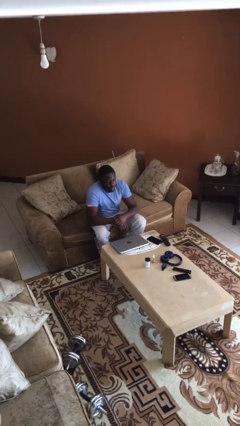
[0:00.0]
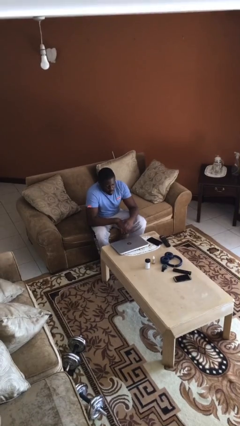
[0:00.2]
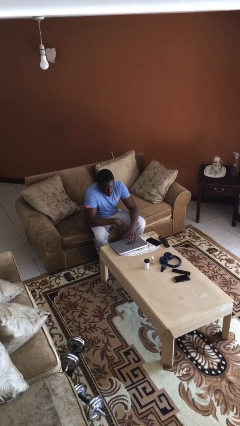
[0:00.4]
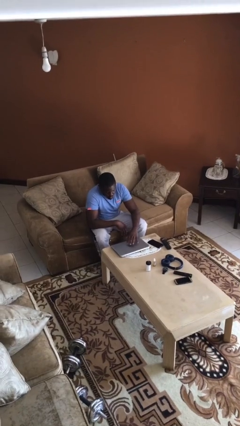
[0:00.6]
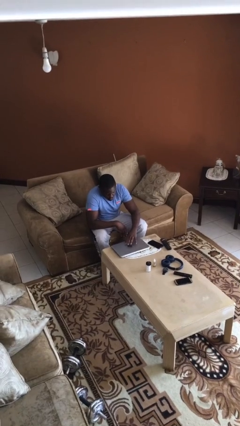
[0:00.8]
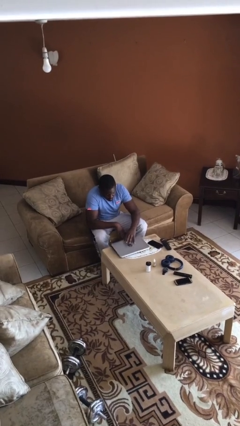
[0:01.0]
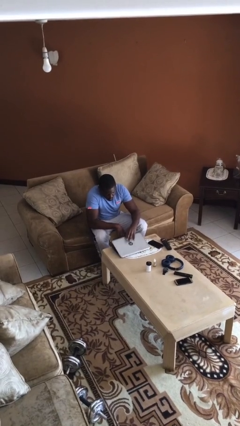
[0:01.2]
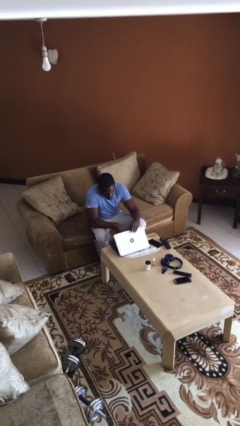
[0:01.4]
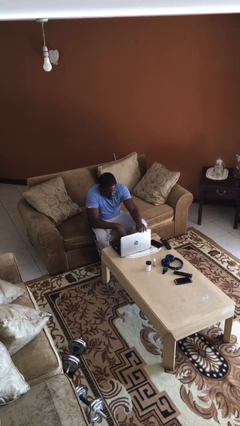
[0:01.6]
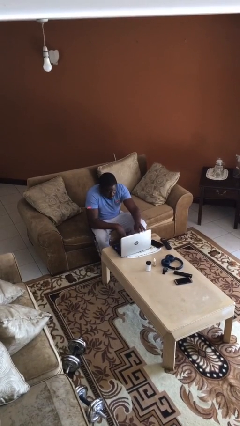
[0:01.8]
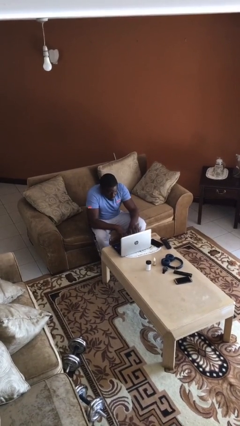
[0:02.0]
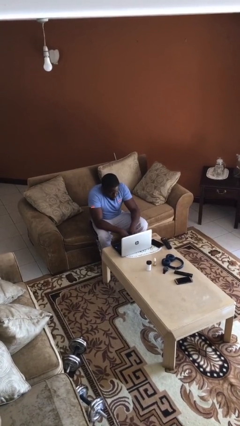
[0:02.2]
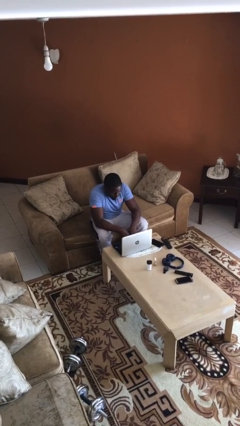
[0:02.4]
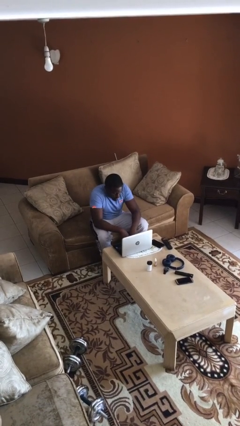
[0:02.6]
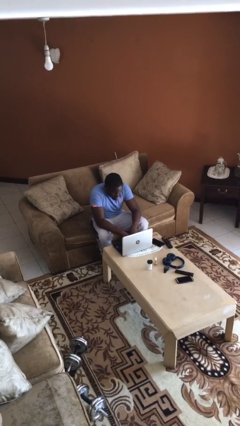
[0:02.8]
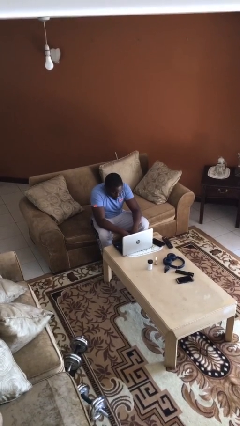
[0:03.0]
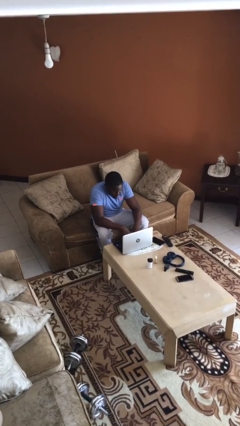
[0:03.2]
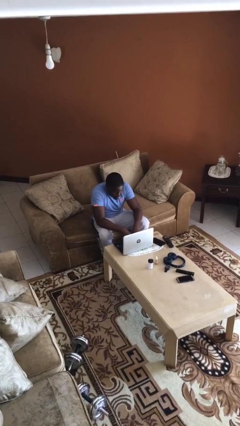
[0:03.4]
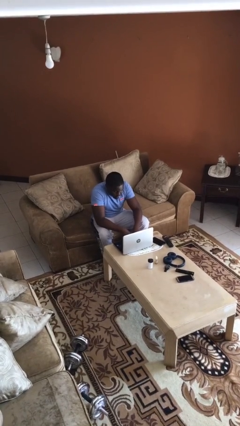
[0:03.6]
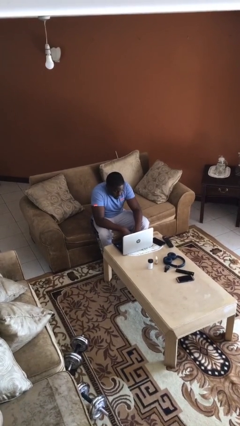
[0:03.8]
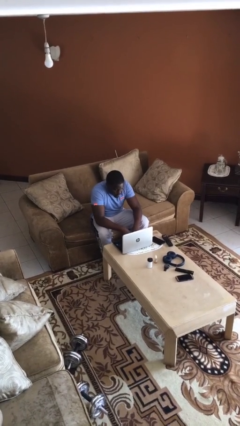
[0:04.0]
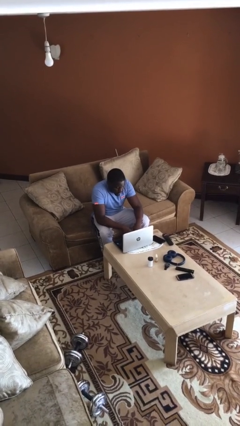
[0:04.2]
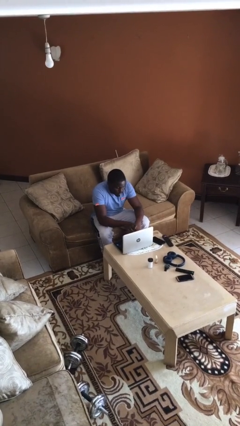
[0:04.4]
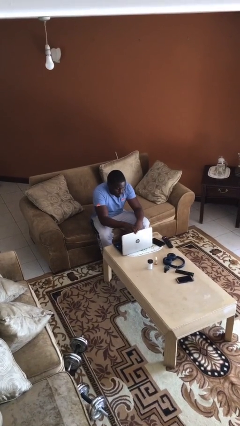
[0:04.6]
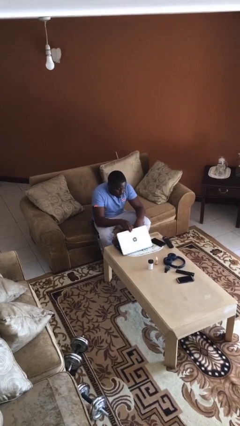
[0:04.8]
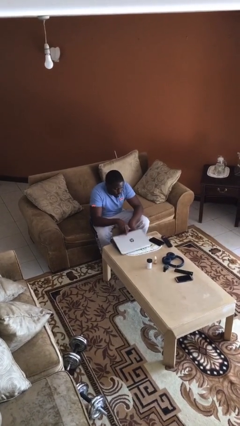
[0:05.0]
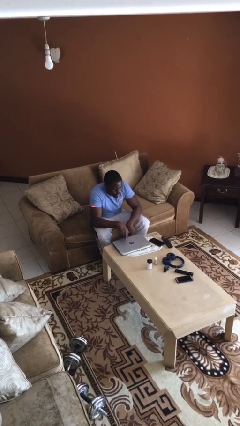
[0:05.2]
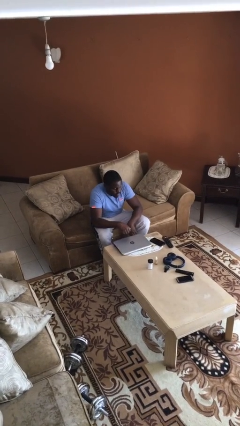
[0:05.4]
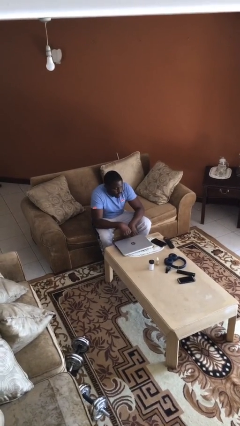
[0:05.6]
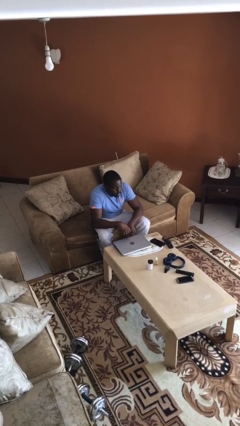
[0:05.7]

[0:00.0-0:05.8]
person interacts with laptop

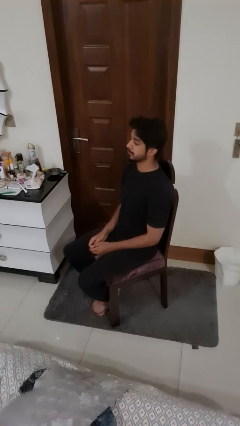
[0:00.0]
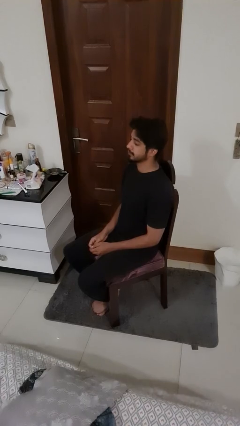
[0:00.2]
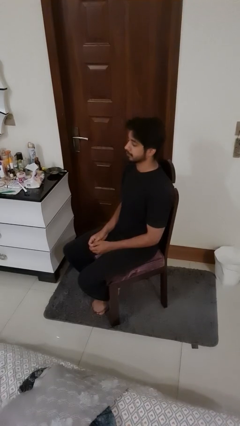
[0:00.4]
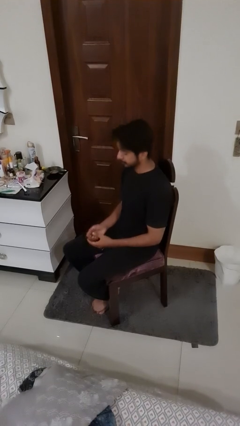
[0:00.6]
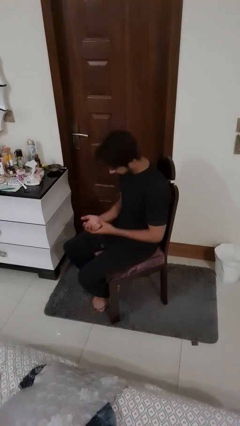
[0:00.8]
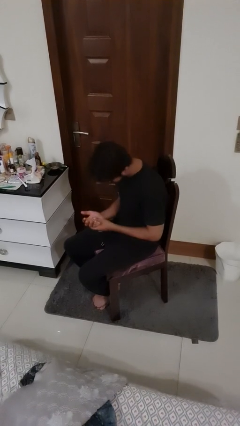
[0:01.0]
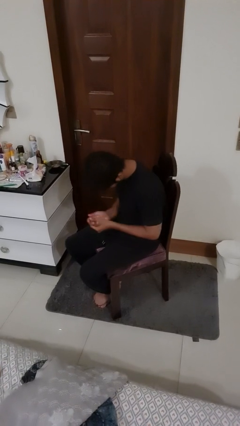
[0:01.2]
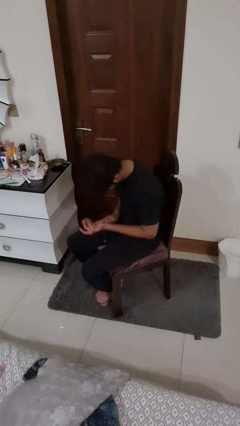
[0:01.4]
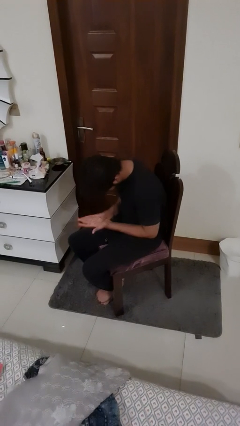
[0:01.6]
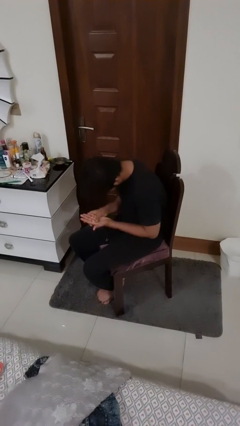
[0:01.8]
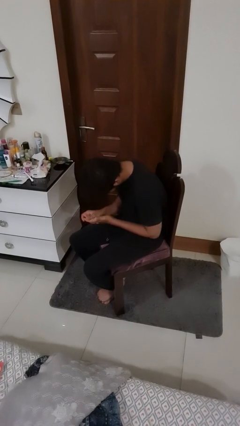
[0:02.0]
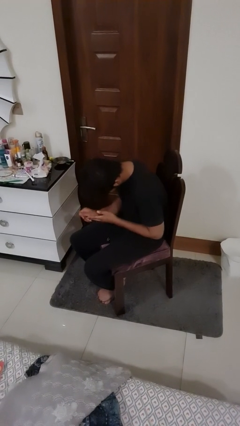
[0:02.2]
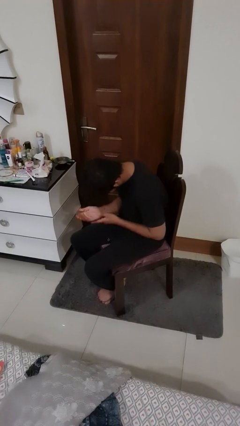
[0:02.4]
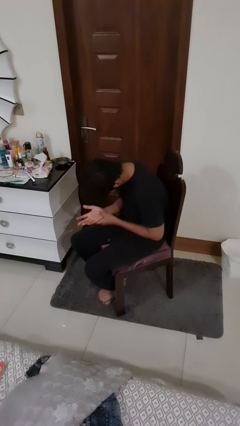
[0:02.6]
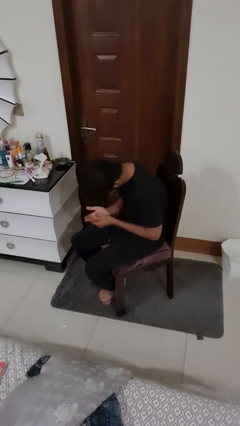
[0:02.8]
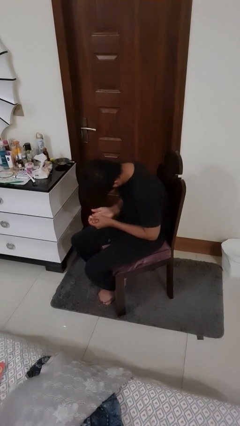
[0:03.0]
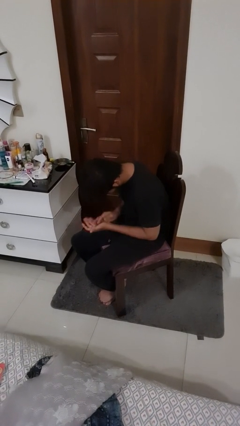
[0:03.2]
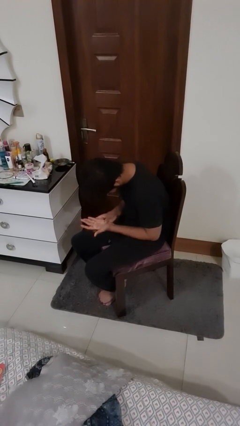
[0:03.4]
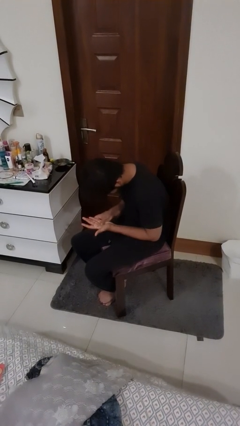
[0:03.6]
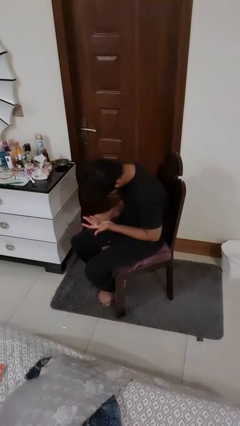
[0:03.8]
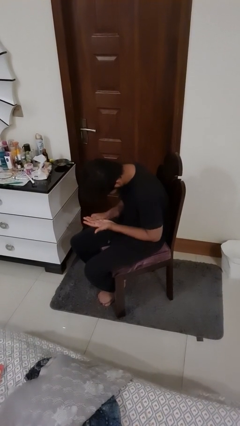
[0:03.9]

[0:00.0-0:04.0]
person looks at hands in lap

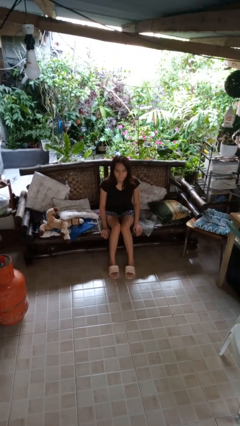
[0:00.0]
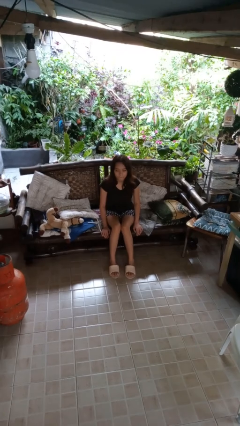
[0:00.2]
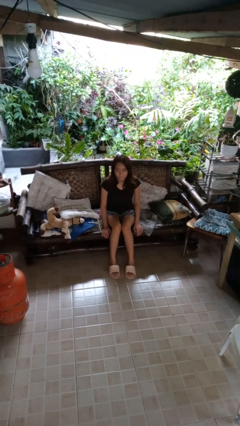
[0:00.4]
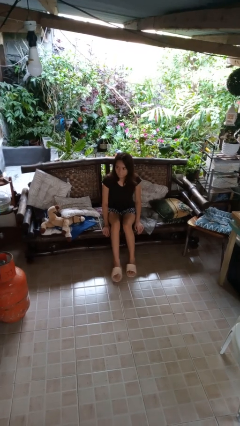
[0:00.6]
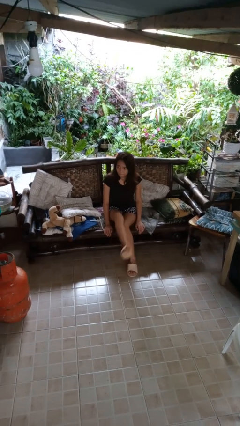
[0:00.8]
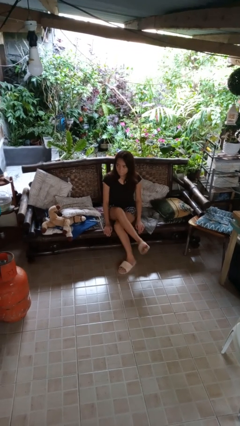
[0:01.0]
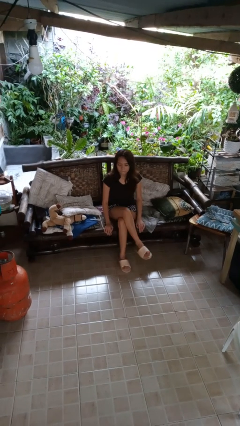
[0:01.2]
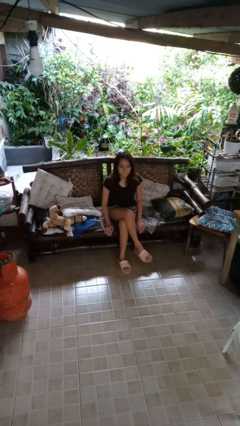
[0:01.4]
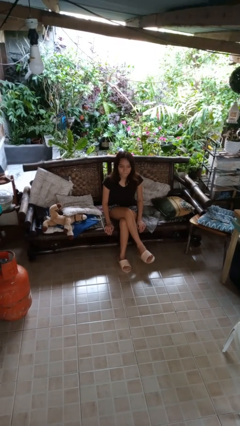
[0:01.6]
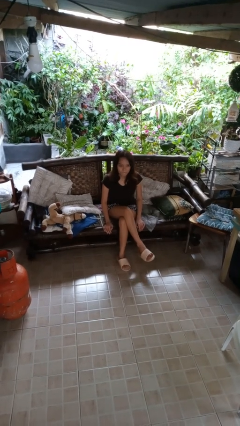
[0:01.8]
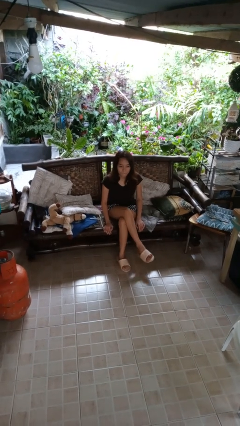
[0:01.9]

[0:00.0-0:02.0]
person crosses legs

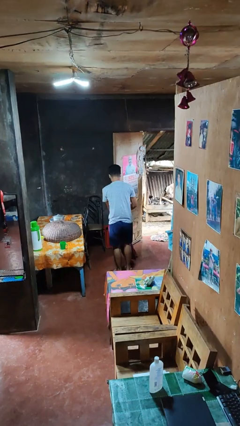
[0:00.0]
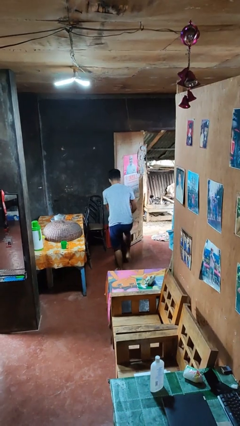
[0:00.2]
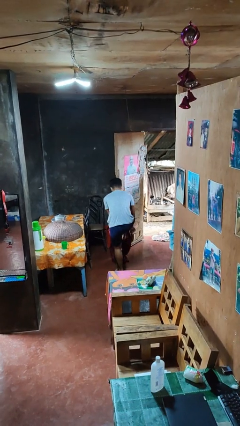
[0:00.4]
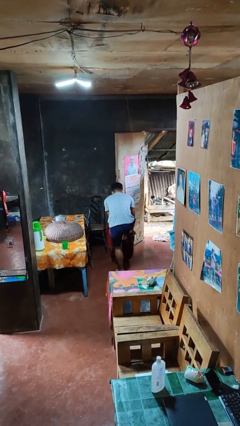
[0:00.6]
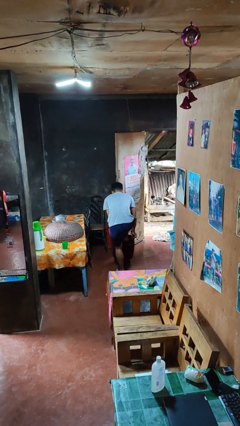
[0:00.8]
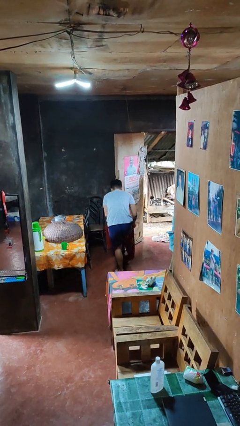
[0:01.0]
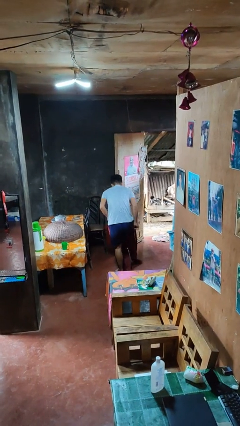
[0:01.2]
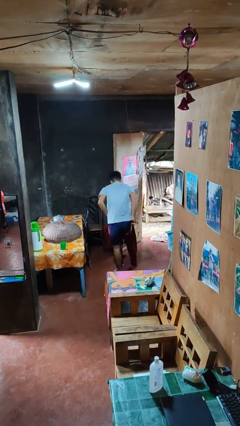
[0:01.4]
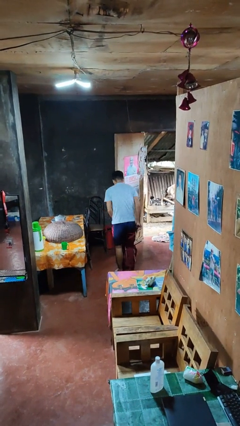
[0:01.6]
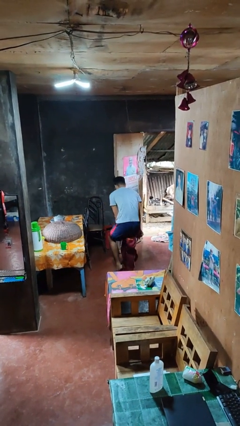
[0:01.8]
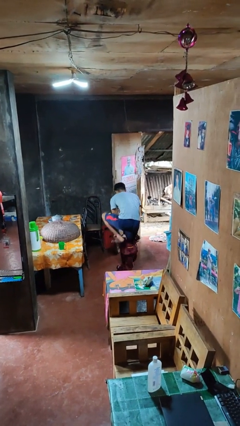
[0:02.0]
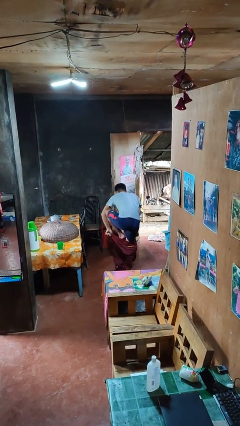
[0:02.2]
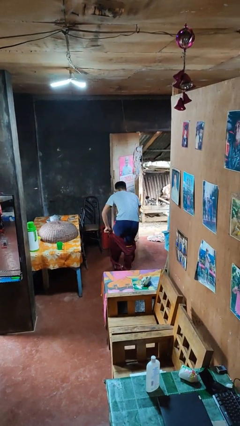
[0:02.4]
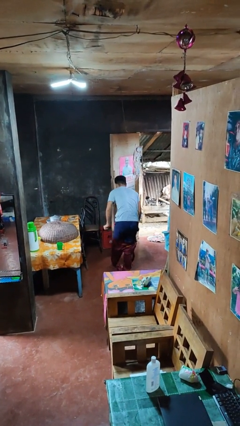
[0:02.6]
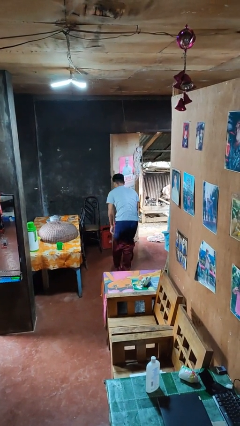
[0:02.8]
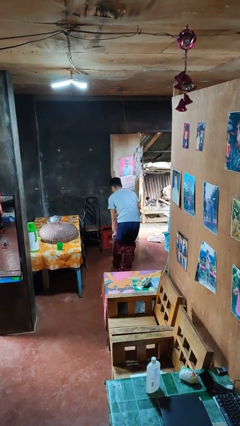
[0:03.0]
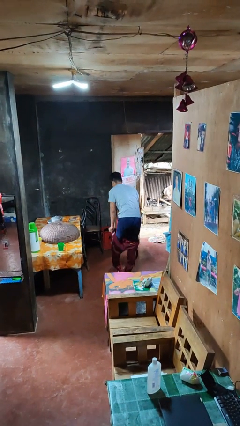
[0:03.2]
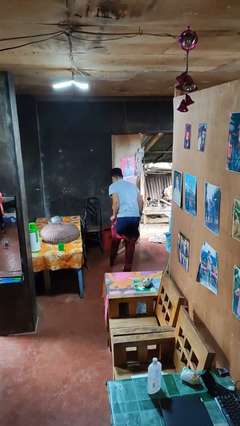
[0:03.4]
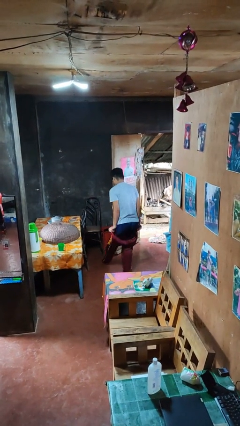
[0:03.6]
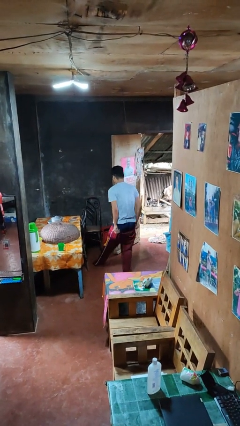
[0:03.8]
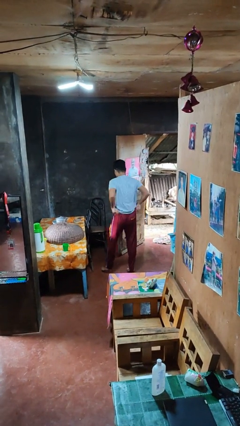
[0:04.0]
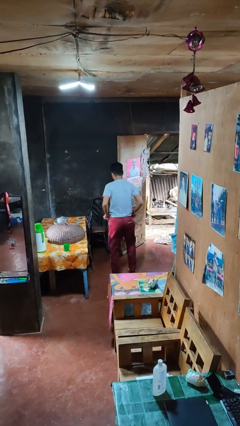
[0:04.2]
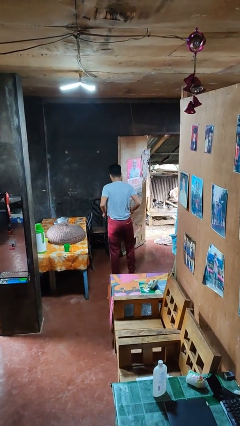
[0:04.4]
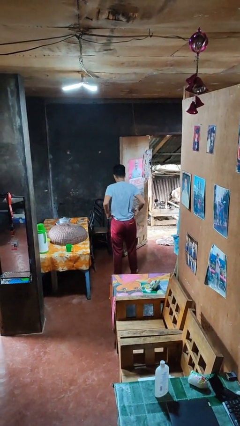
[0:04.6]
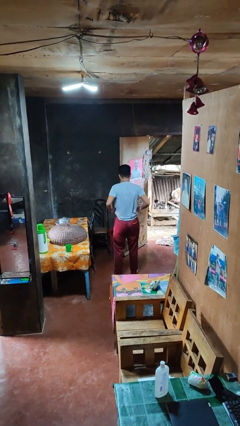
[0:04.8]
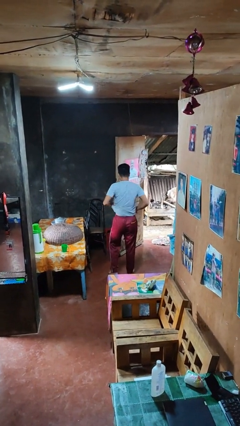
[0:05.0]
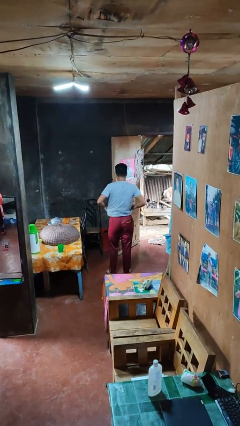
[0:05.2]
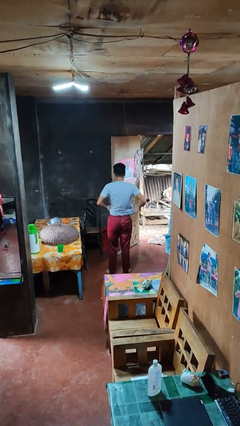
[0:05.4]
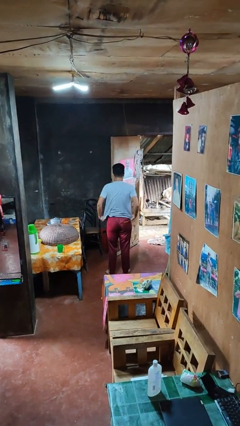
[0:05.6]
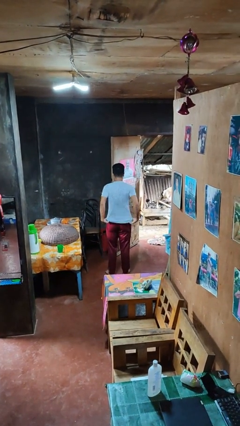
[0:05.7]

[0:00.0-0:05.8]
person puts on pants
